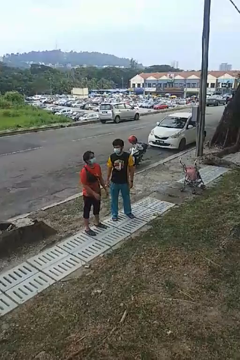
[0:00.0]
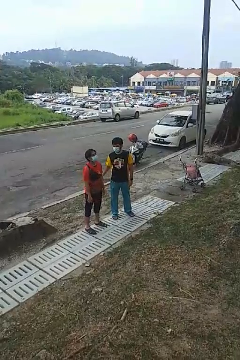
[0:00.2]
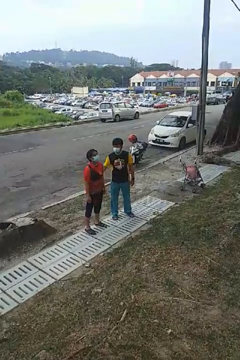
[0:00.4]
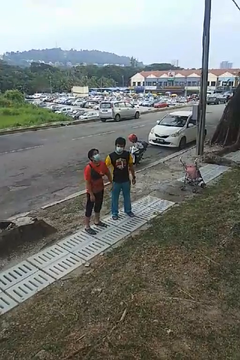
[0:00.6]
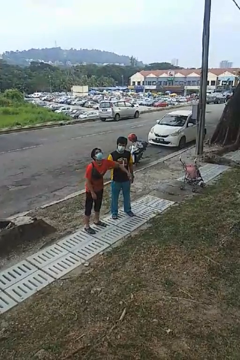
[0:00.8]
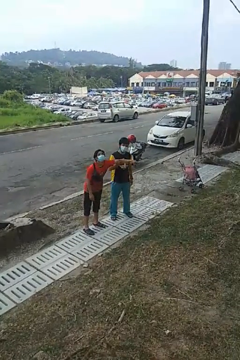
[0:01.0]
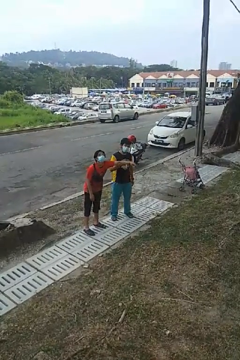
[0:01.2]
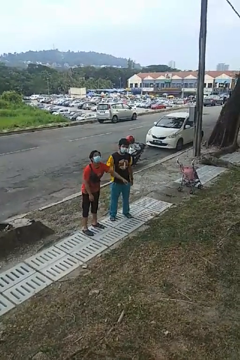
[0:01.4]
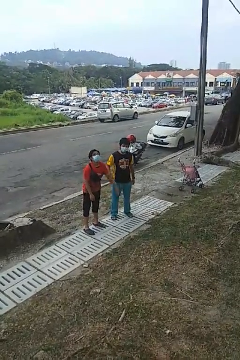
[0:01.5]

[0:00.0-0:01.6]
person grabs person by bicep

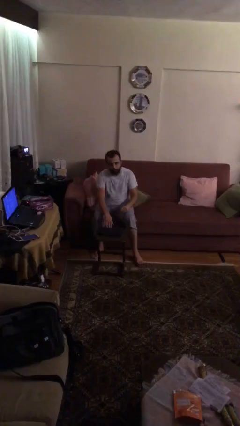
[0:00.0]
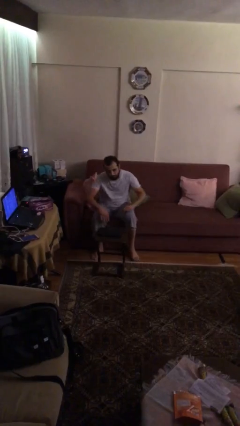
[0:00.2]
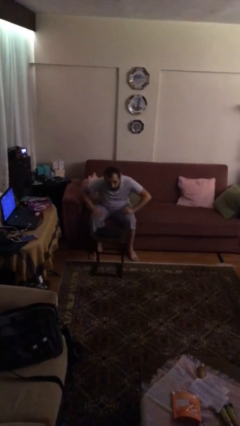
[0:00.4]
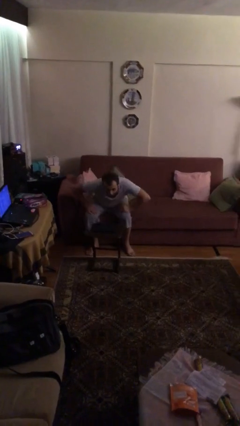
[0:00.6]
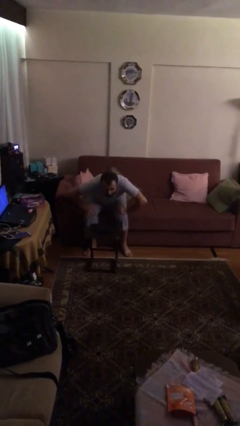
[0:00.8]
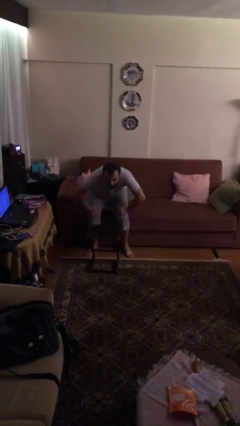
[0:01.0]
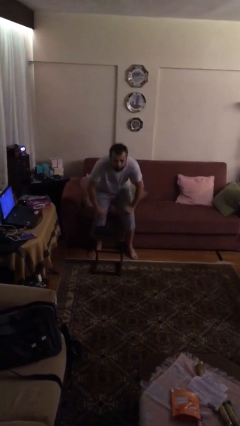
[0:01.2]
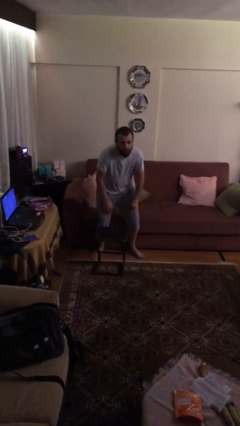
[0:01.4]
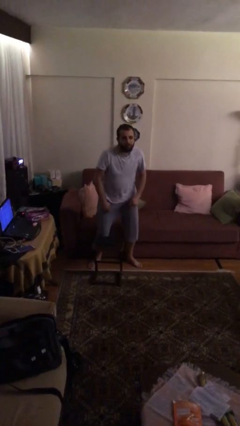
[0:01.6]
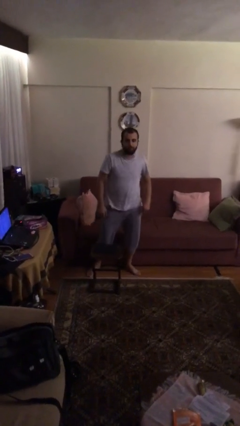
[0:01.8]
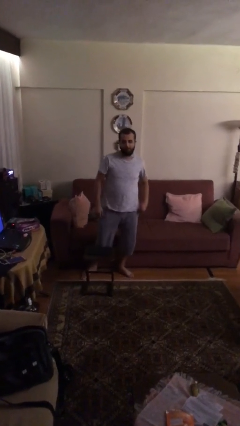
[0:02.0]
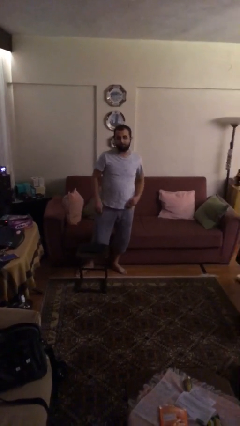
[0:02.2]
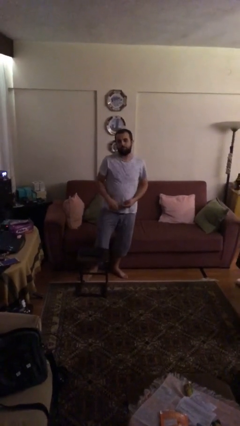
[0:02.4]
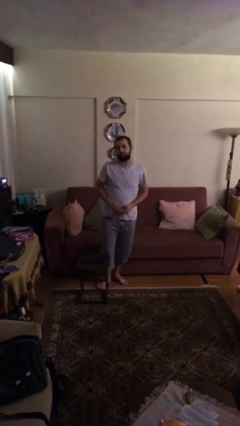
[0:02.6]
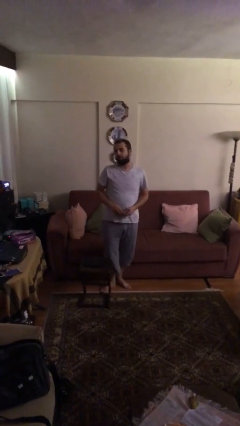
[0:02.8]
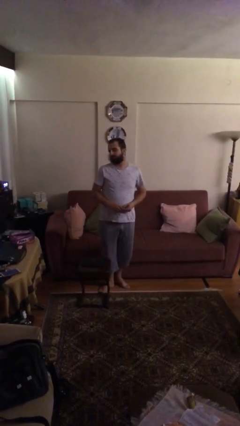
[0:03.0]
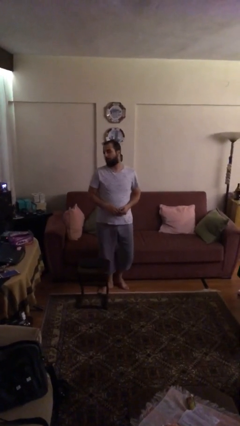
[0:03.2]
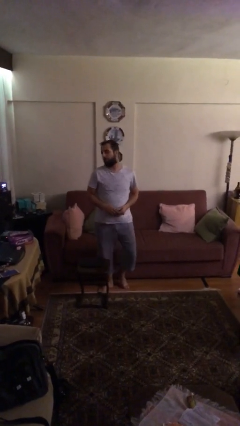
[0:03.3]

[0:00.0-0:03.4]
person stands up

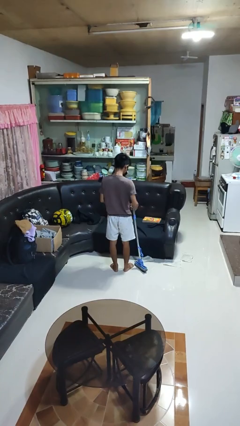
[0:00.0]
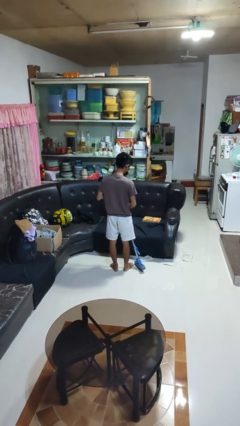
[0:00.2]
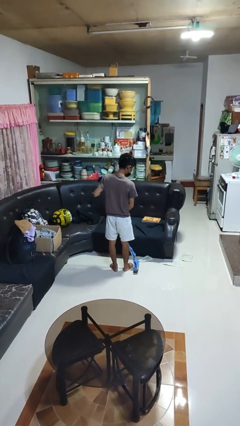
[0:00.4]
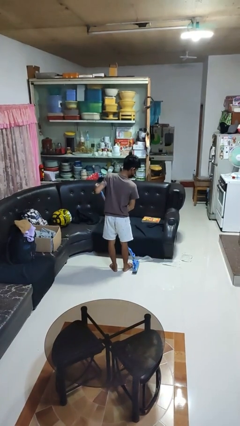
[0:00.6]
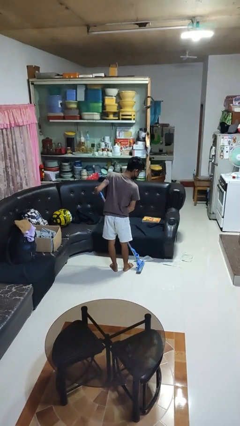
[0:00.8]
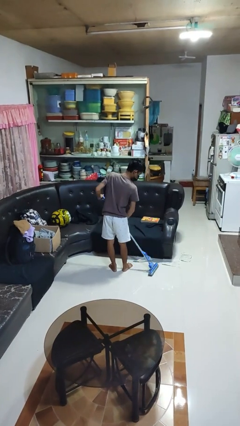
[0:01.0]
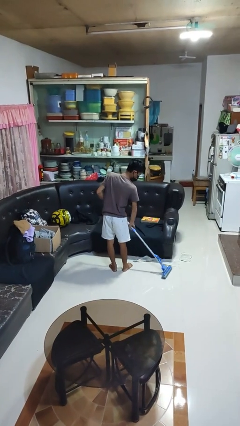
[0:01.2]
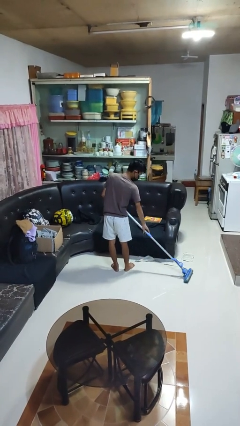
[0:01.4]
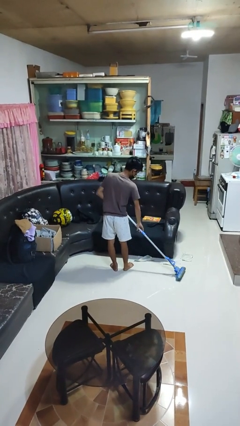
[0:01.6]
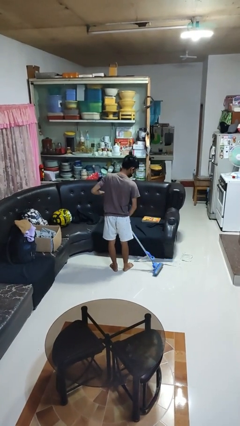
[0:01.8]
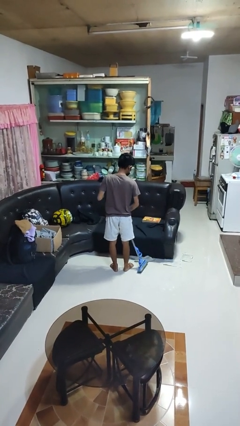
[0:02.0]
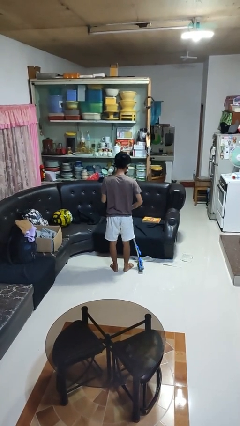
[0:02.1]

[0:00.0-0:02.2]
person mops

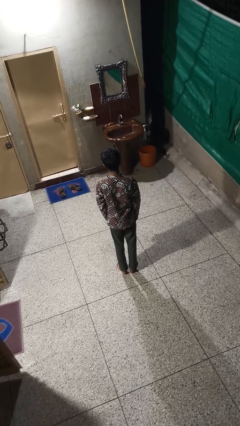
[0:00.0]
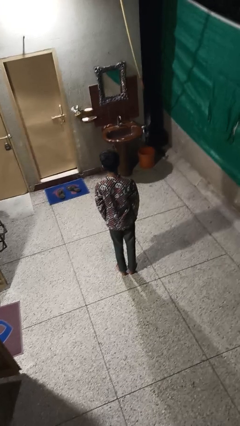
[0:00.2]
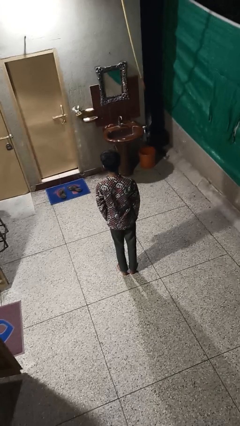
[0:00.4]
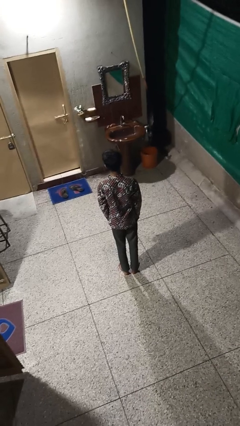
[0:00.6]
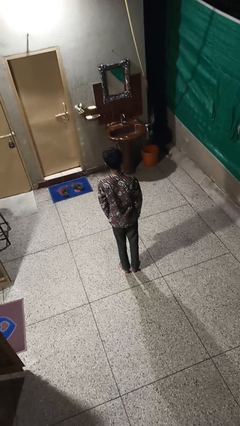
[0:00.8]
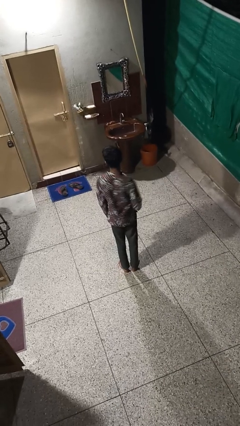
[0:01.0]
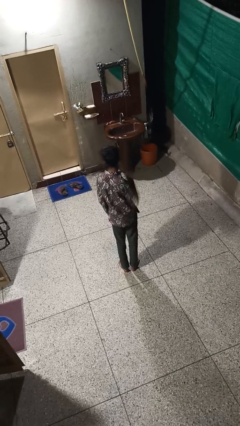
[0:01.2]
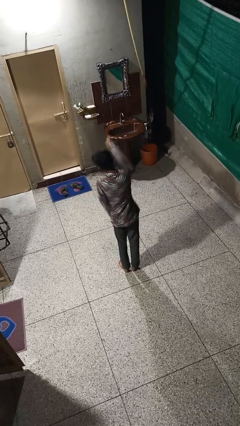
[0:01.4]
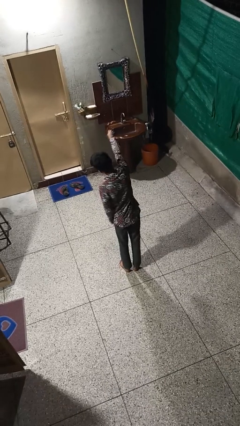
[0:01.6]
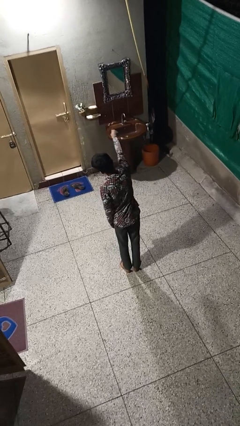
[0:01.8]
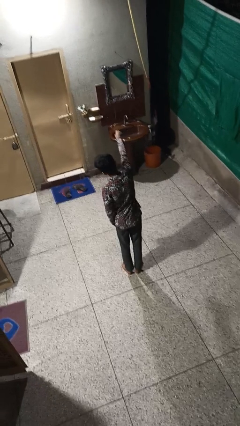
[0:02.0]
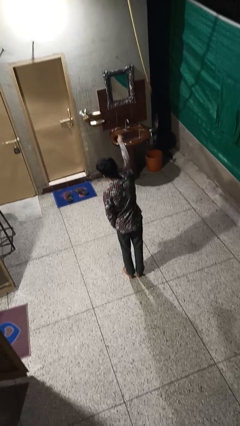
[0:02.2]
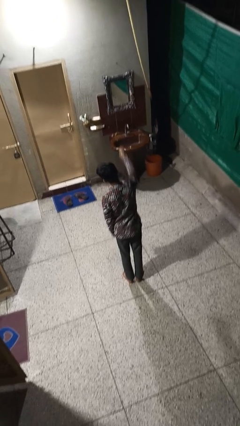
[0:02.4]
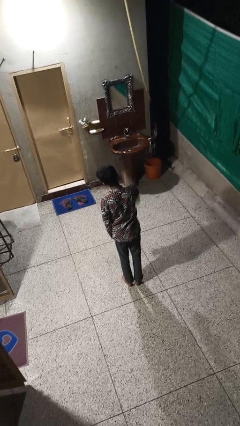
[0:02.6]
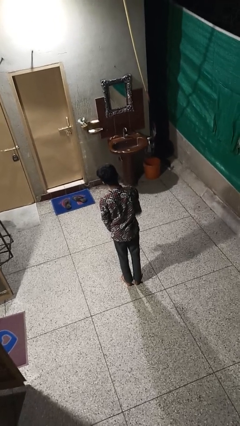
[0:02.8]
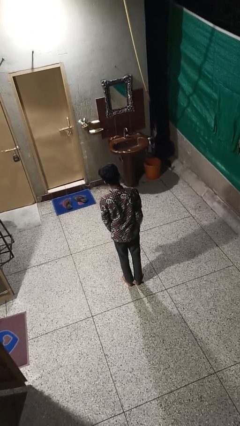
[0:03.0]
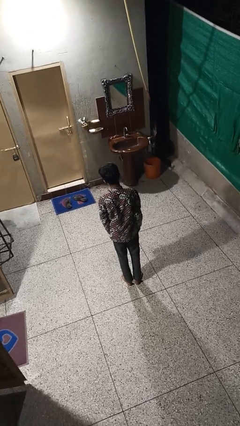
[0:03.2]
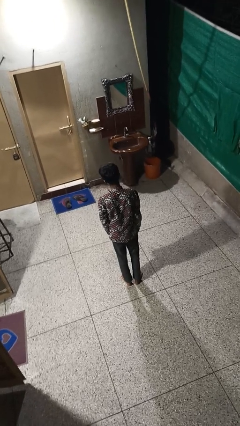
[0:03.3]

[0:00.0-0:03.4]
person punches

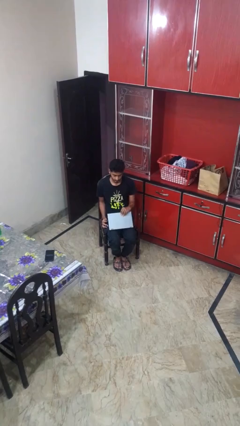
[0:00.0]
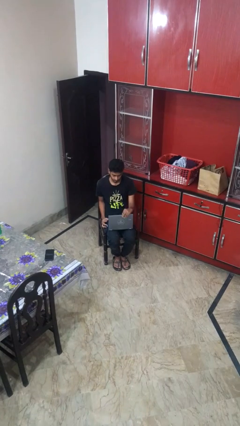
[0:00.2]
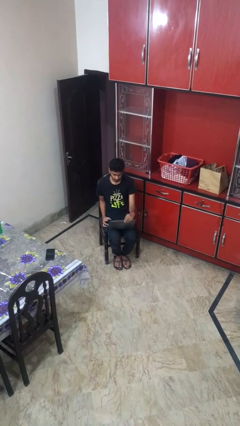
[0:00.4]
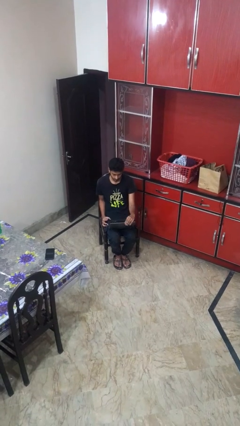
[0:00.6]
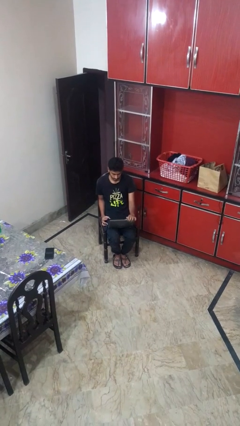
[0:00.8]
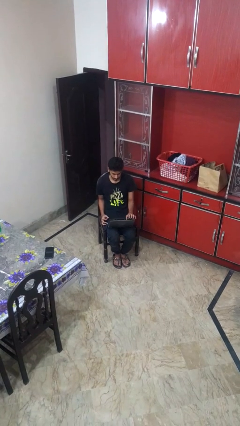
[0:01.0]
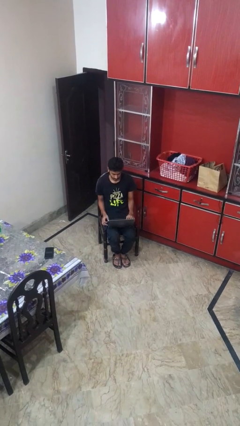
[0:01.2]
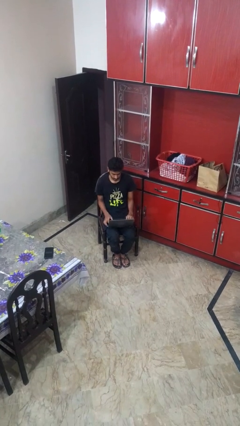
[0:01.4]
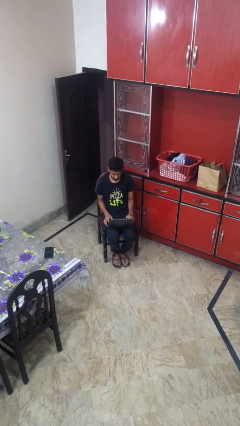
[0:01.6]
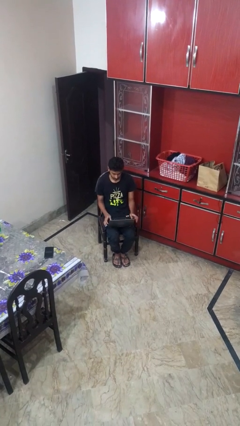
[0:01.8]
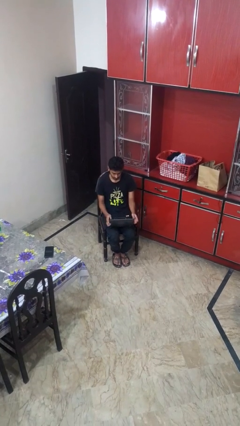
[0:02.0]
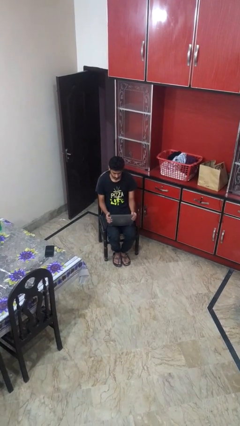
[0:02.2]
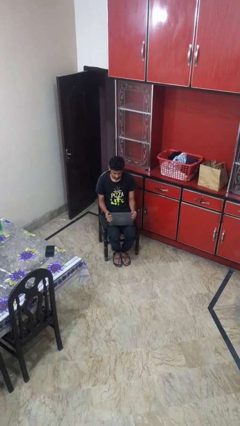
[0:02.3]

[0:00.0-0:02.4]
person opens laptop

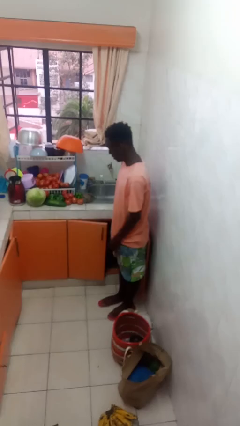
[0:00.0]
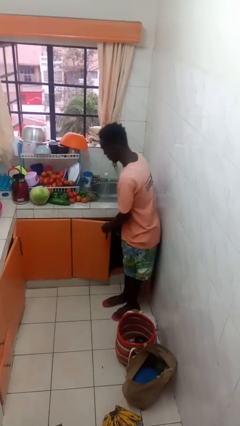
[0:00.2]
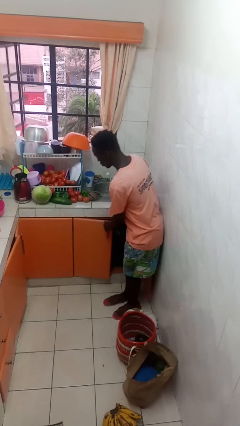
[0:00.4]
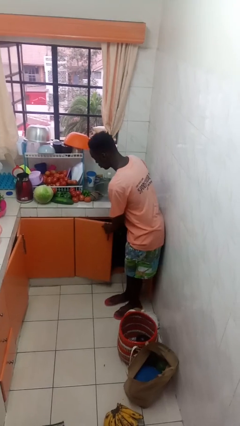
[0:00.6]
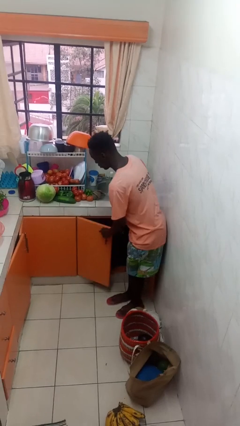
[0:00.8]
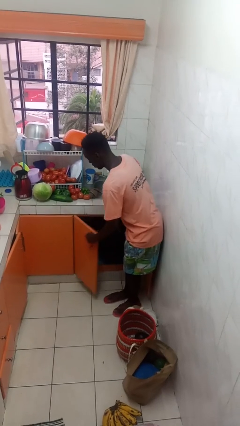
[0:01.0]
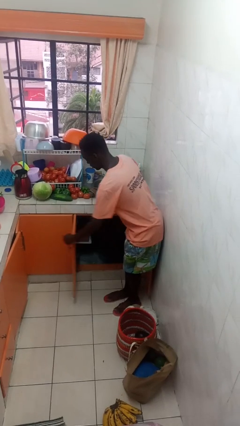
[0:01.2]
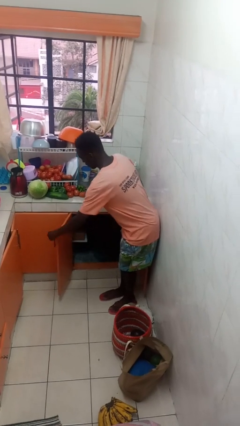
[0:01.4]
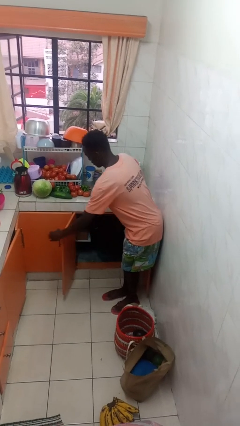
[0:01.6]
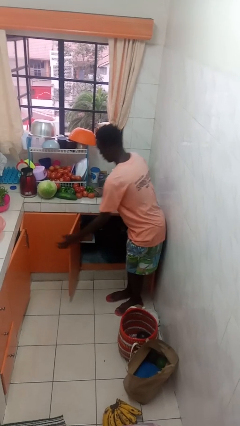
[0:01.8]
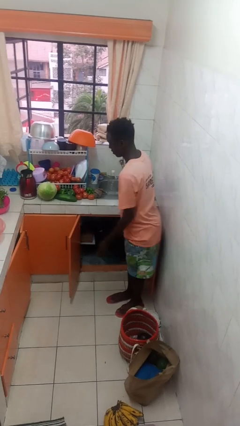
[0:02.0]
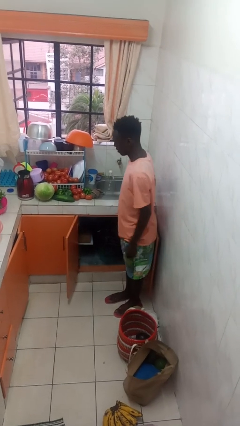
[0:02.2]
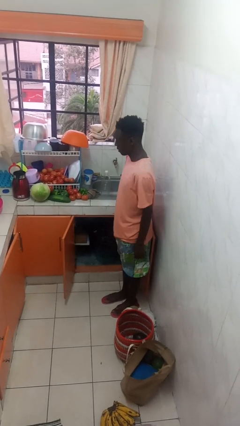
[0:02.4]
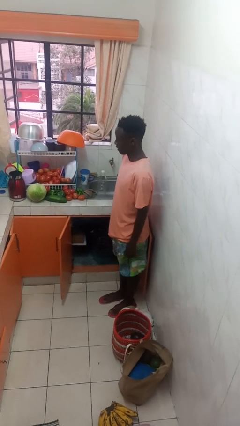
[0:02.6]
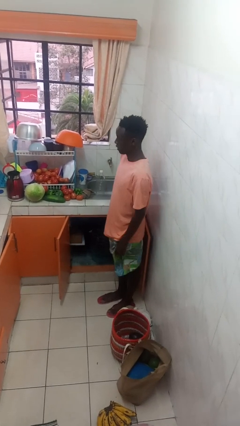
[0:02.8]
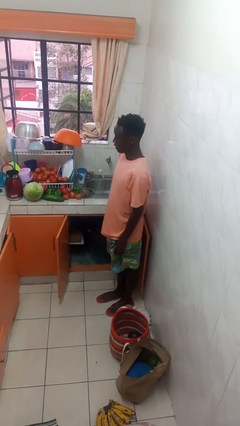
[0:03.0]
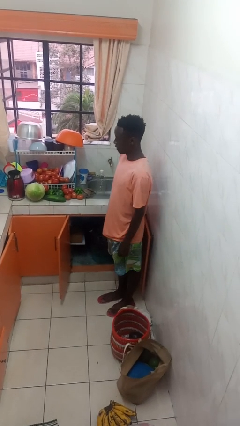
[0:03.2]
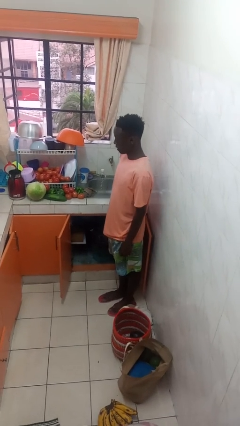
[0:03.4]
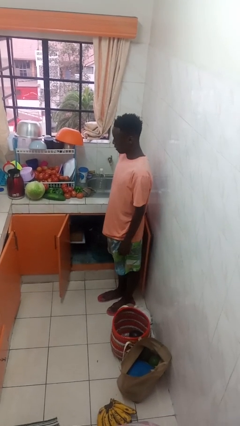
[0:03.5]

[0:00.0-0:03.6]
person opens cabinet

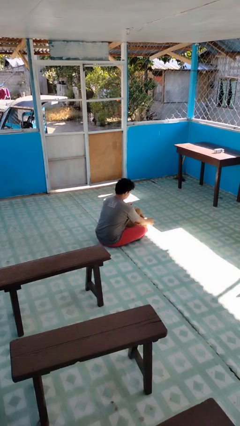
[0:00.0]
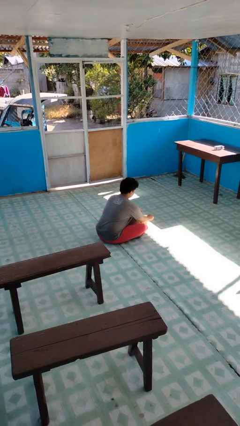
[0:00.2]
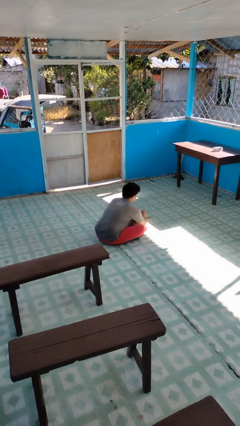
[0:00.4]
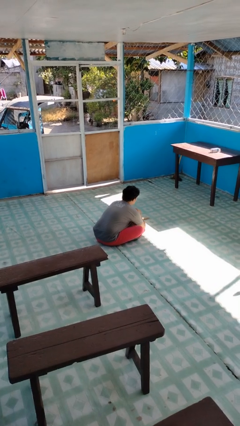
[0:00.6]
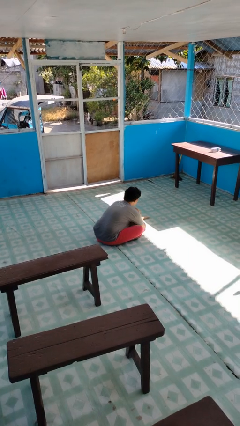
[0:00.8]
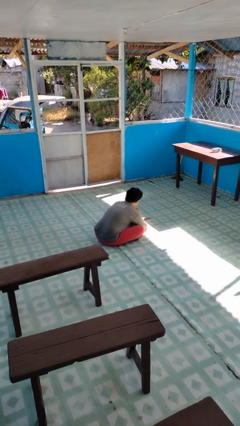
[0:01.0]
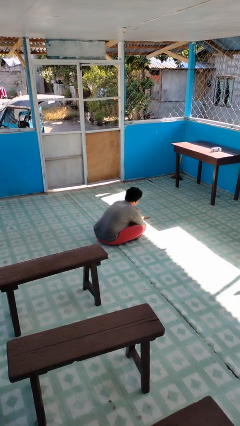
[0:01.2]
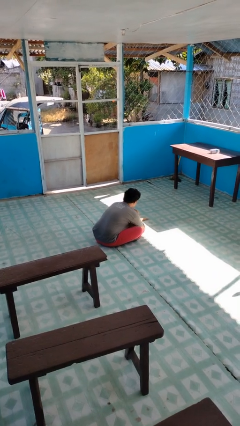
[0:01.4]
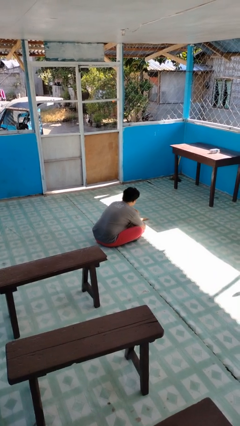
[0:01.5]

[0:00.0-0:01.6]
person hugs dog
